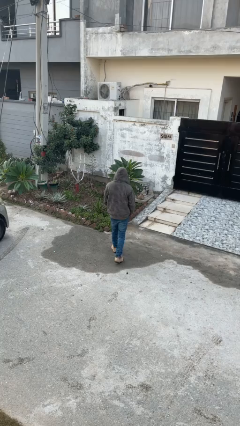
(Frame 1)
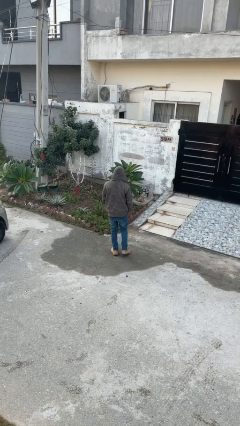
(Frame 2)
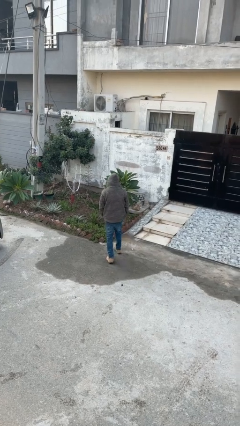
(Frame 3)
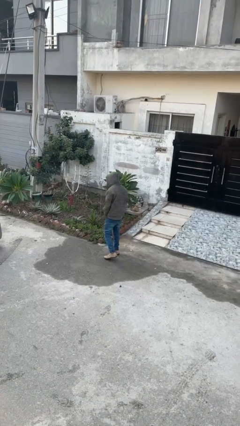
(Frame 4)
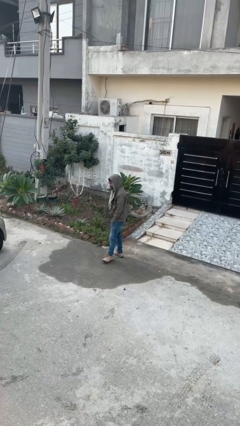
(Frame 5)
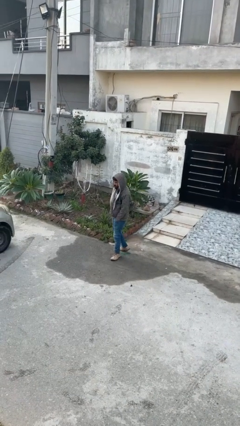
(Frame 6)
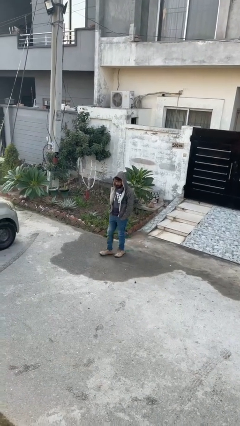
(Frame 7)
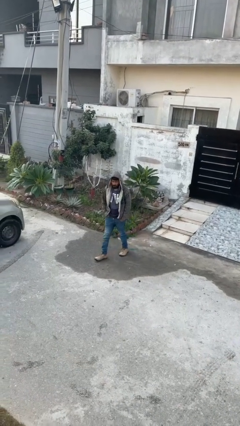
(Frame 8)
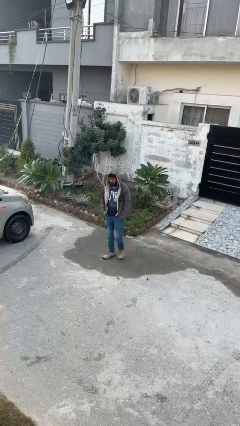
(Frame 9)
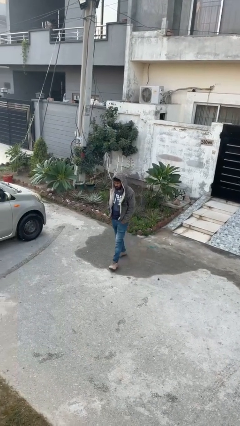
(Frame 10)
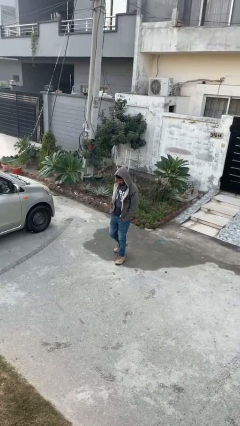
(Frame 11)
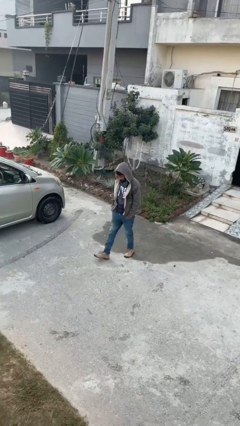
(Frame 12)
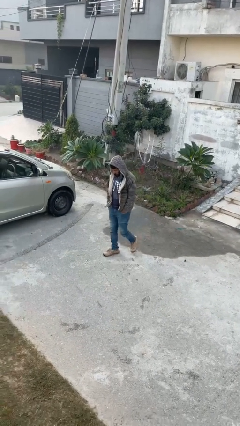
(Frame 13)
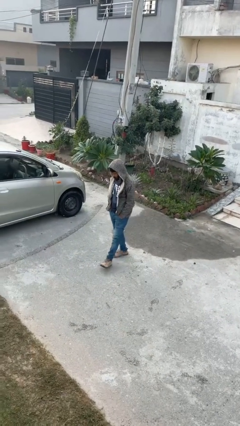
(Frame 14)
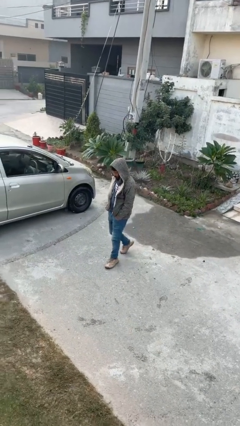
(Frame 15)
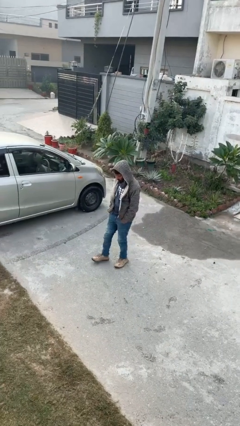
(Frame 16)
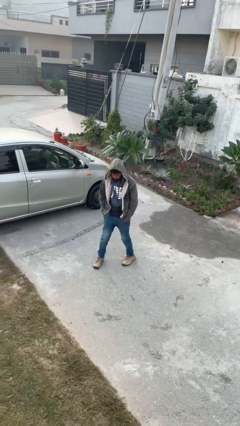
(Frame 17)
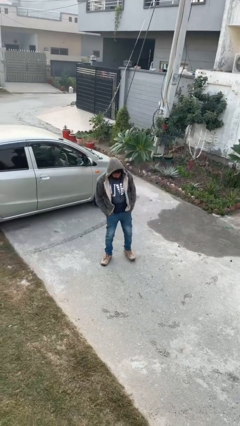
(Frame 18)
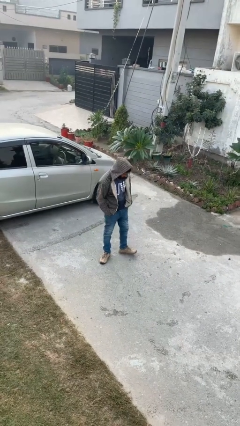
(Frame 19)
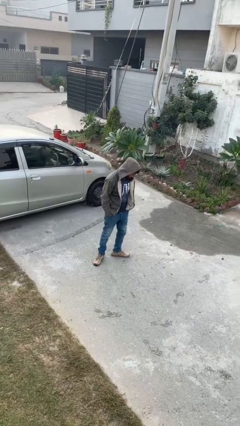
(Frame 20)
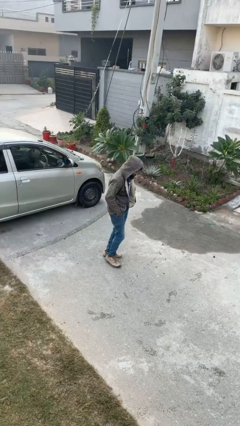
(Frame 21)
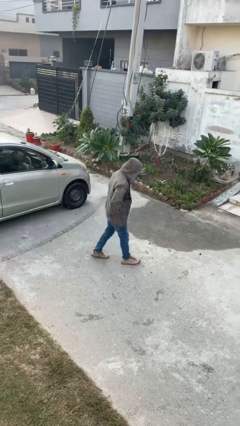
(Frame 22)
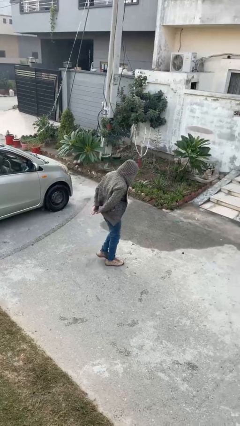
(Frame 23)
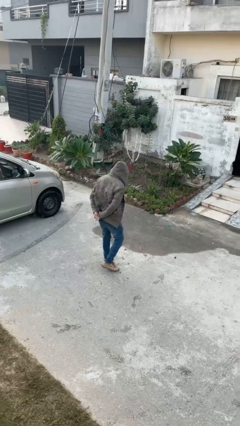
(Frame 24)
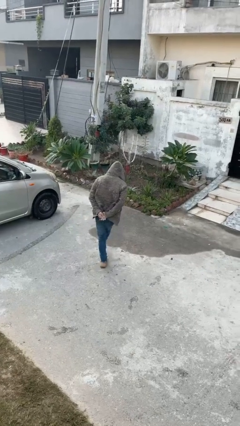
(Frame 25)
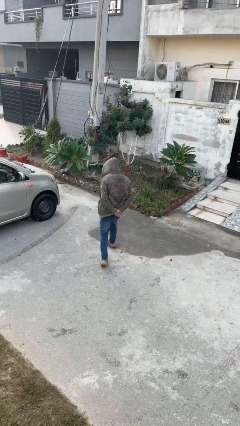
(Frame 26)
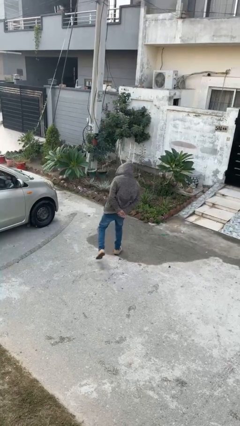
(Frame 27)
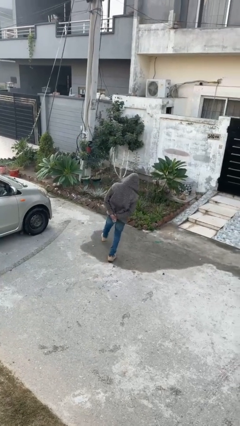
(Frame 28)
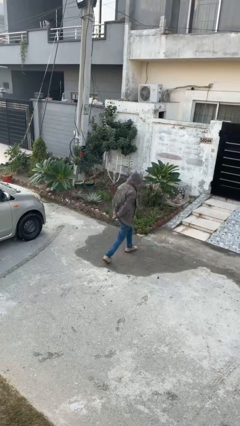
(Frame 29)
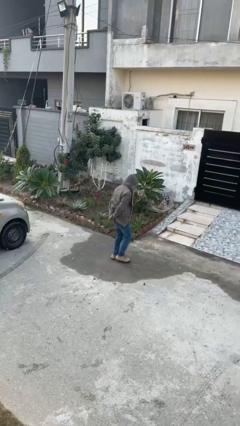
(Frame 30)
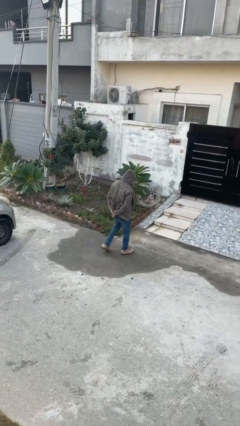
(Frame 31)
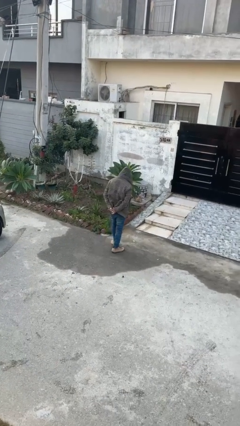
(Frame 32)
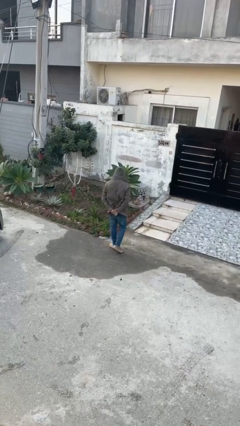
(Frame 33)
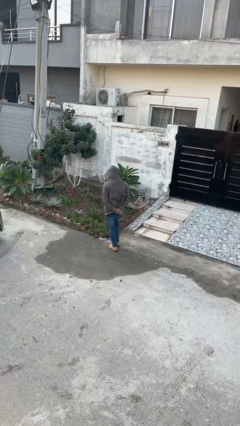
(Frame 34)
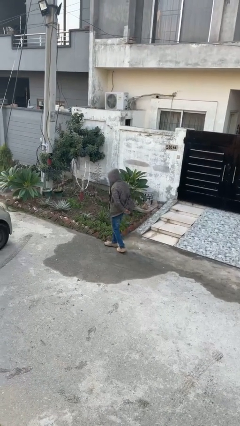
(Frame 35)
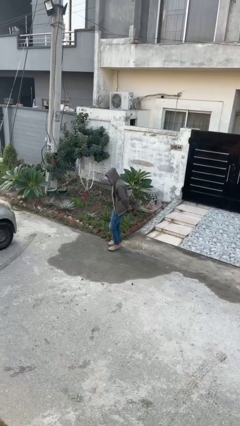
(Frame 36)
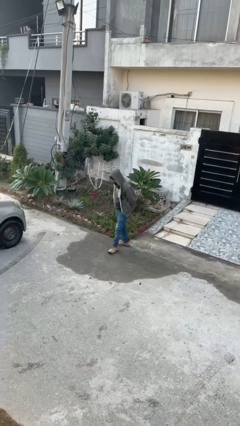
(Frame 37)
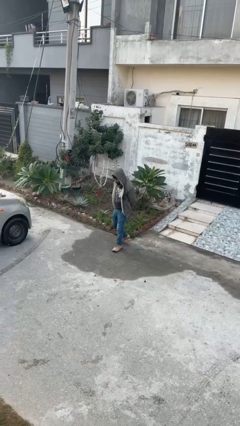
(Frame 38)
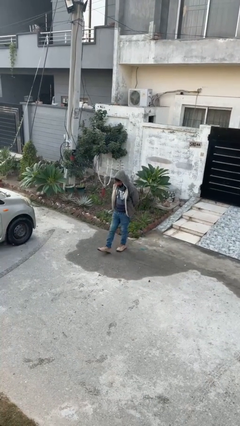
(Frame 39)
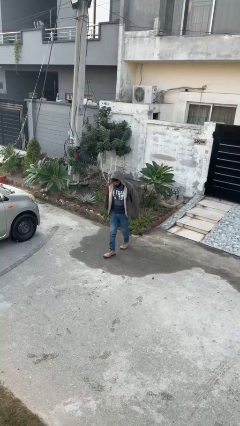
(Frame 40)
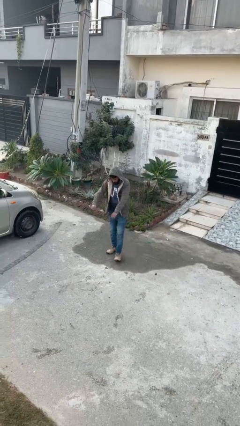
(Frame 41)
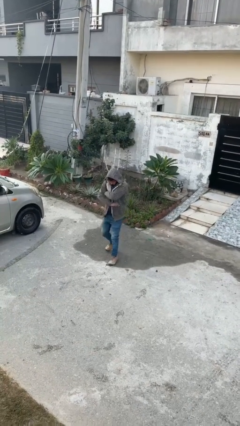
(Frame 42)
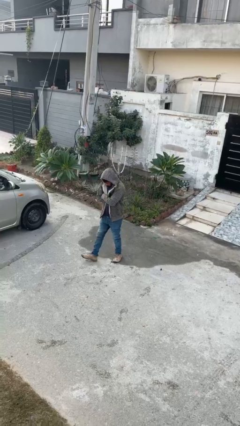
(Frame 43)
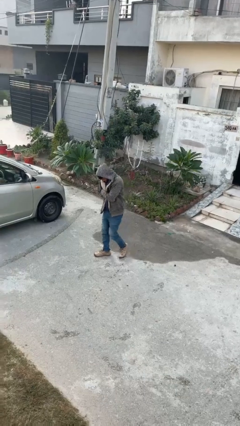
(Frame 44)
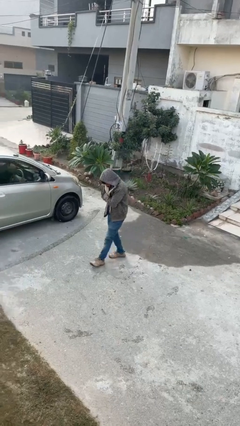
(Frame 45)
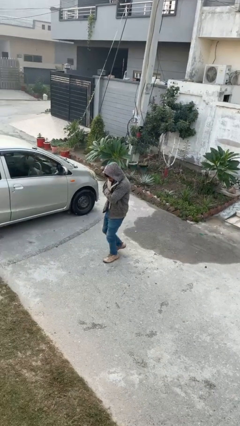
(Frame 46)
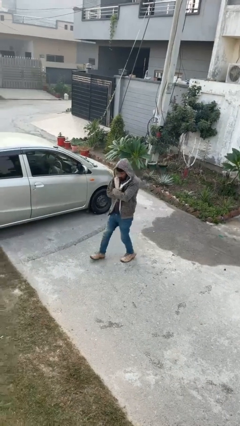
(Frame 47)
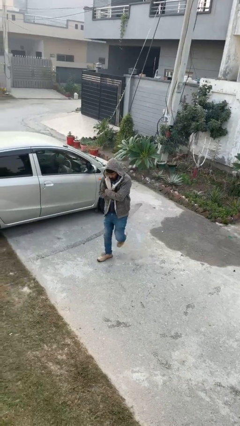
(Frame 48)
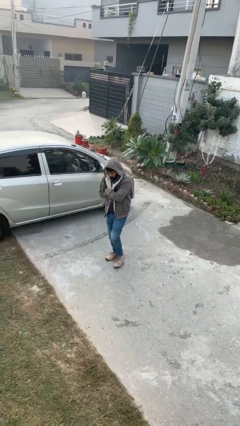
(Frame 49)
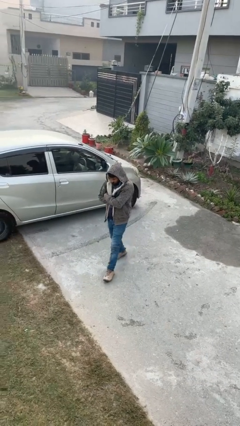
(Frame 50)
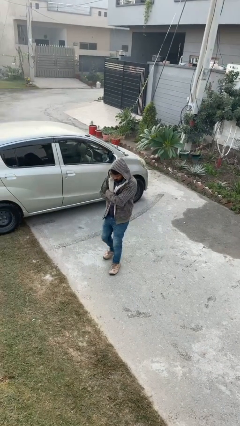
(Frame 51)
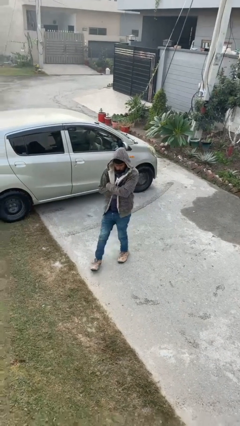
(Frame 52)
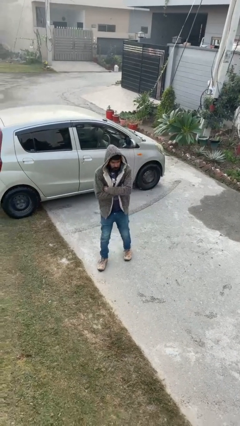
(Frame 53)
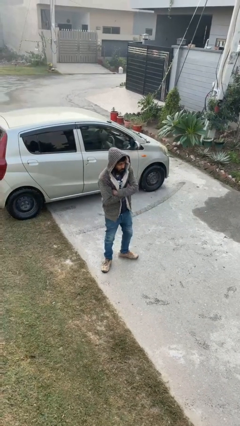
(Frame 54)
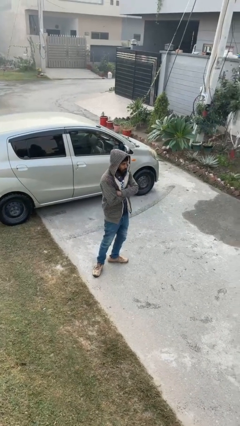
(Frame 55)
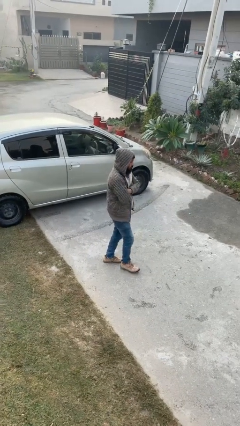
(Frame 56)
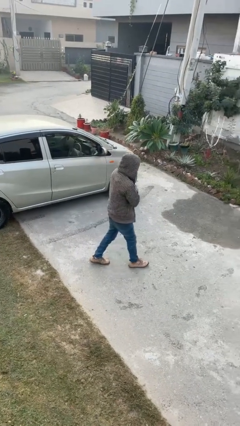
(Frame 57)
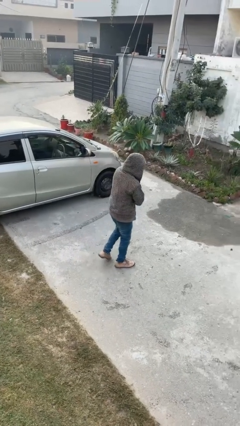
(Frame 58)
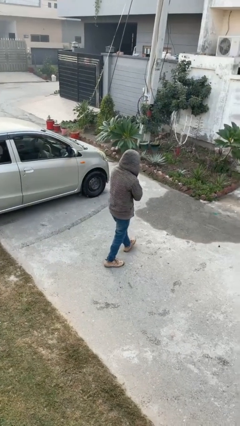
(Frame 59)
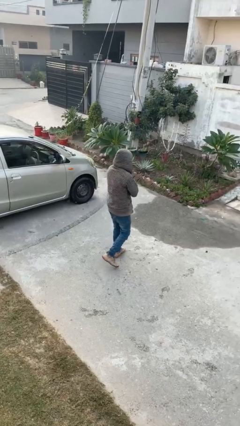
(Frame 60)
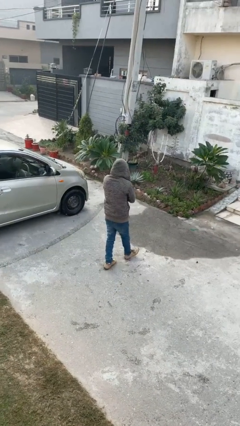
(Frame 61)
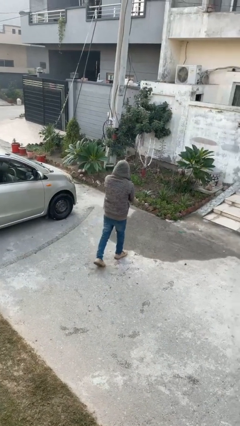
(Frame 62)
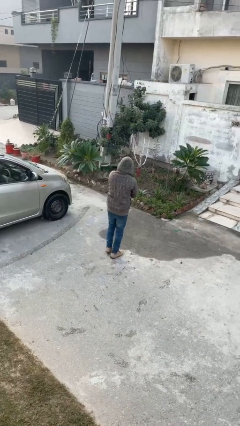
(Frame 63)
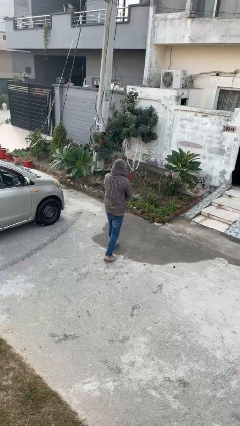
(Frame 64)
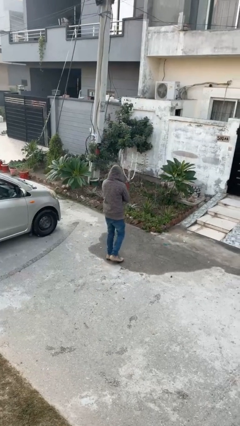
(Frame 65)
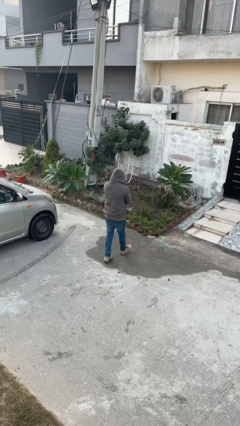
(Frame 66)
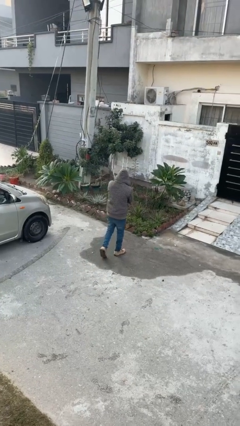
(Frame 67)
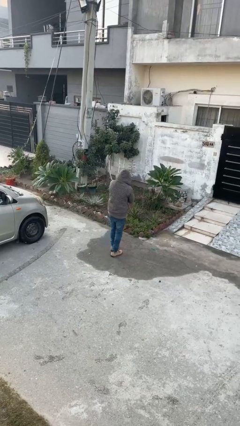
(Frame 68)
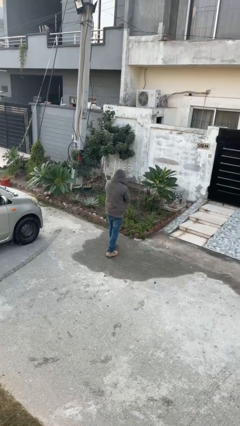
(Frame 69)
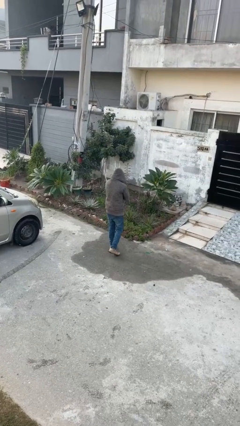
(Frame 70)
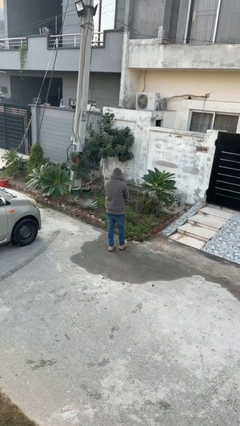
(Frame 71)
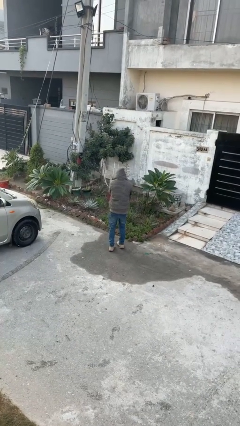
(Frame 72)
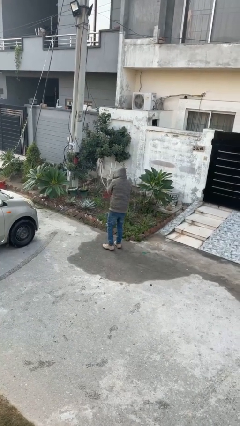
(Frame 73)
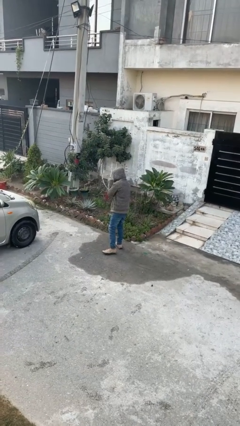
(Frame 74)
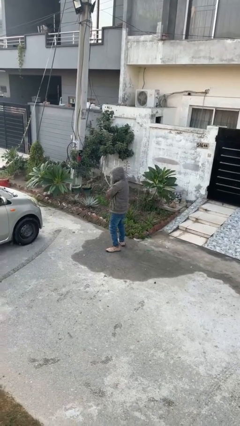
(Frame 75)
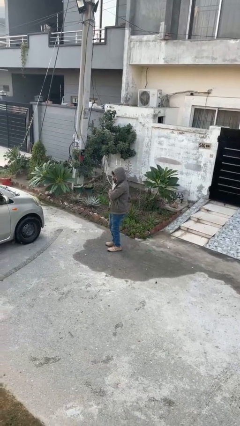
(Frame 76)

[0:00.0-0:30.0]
person walks

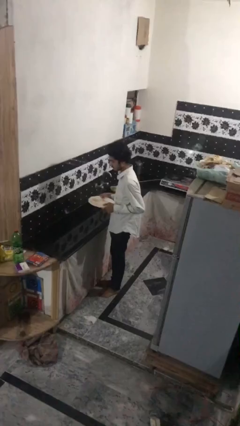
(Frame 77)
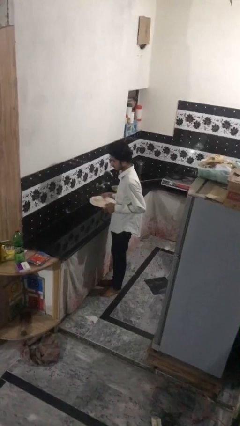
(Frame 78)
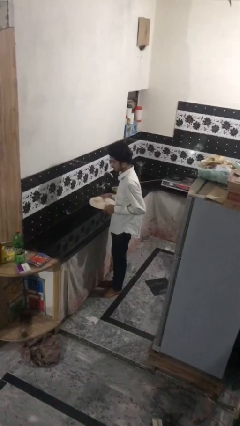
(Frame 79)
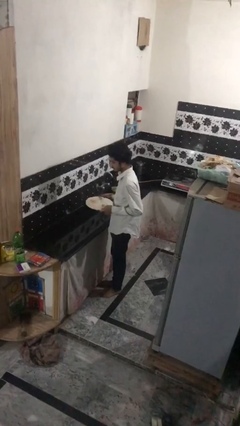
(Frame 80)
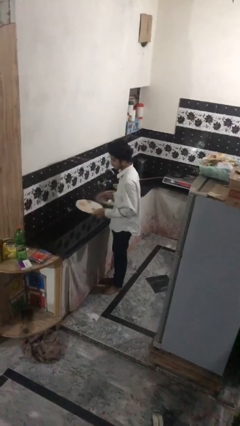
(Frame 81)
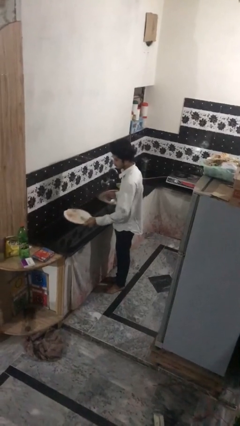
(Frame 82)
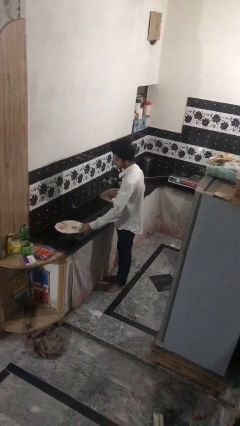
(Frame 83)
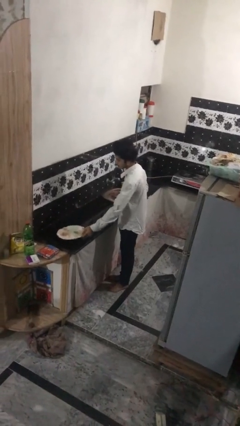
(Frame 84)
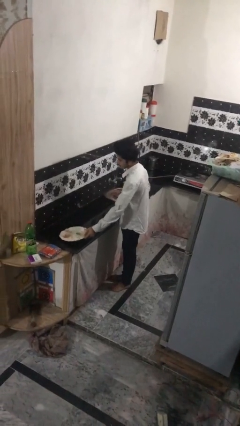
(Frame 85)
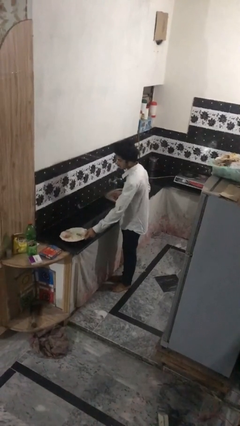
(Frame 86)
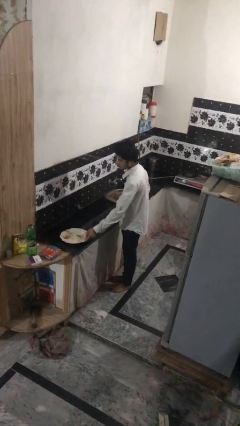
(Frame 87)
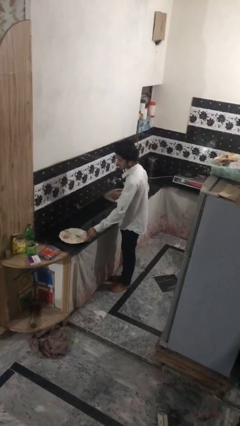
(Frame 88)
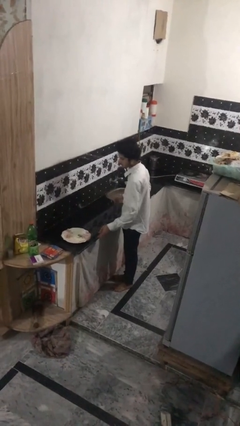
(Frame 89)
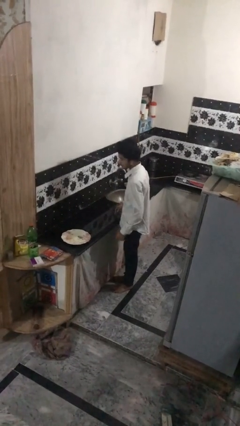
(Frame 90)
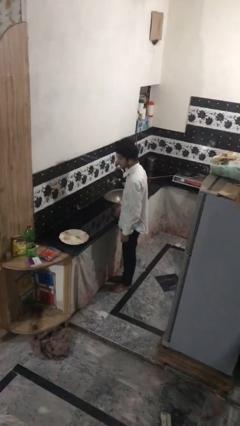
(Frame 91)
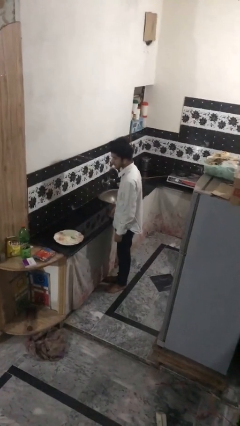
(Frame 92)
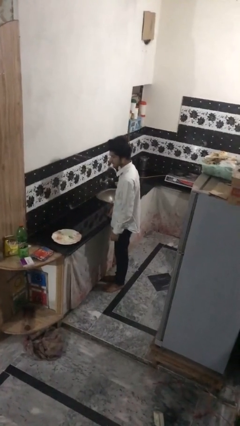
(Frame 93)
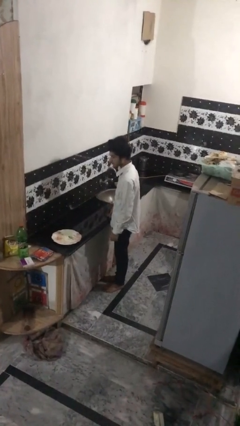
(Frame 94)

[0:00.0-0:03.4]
person puts down object on countertop
